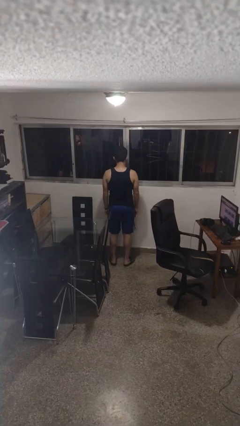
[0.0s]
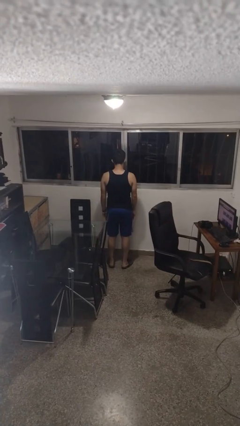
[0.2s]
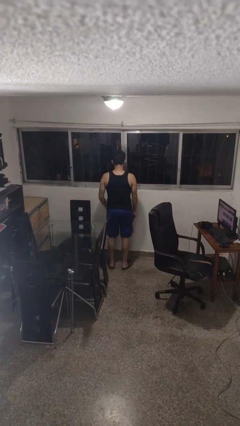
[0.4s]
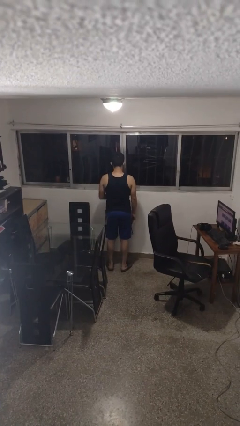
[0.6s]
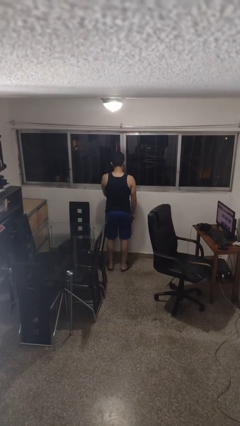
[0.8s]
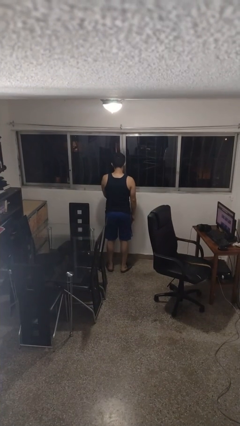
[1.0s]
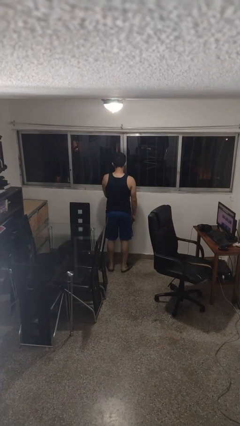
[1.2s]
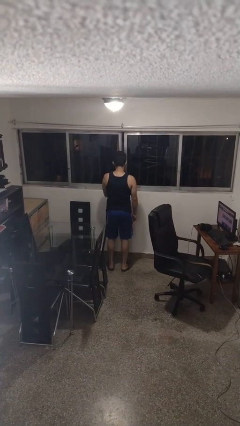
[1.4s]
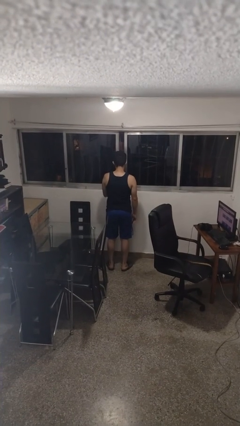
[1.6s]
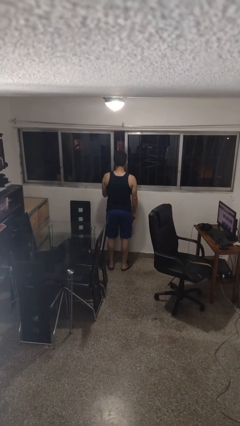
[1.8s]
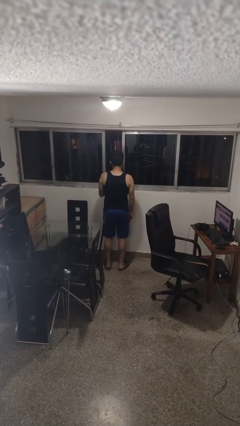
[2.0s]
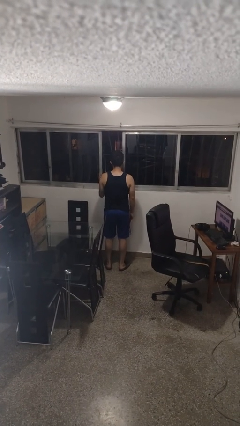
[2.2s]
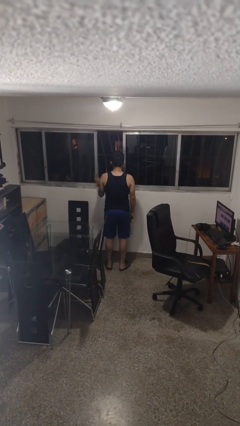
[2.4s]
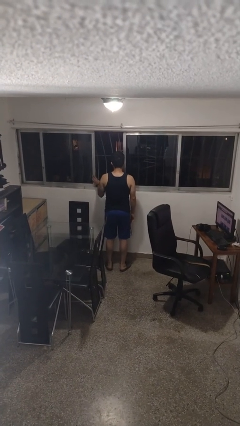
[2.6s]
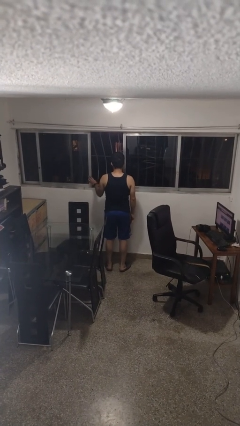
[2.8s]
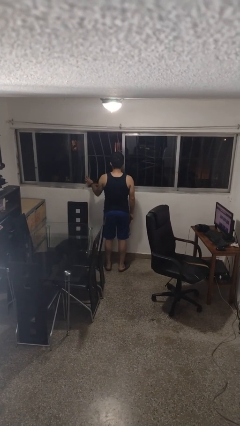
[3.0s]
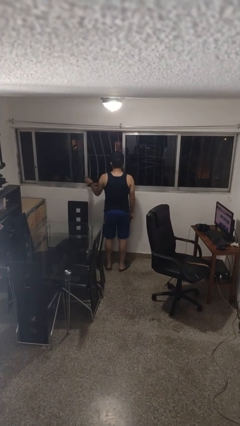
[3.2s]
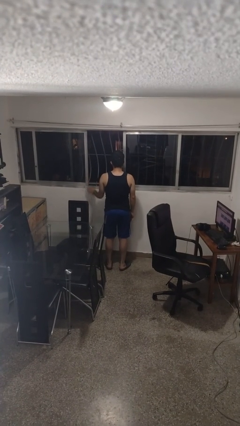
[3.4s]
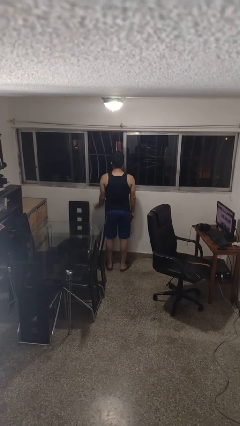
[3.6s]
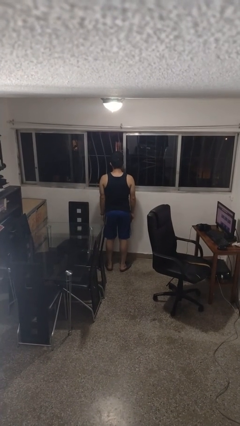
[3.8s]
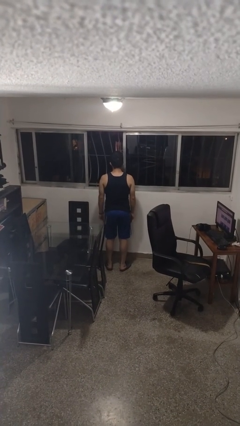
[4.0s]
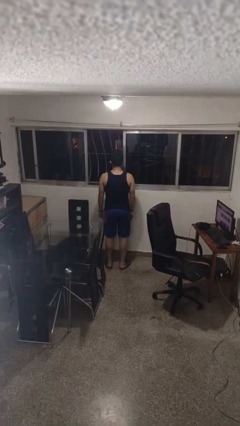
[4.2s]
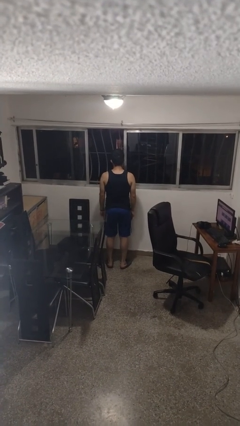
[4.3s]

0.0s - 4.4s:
person opens home window

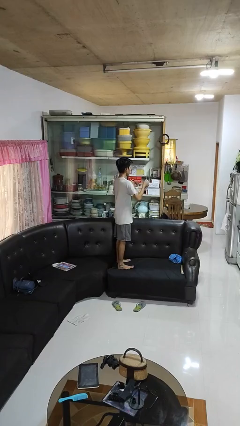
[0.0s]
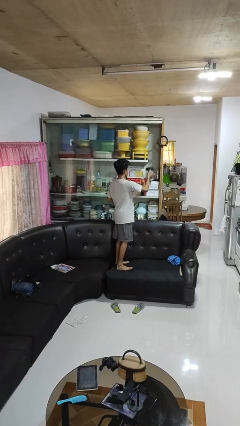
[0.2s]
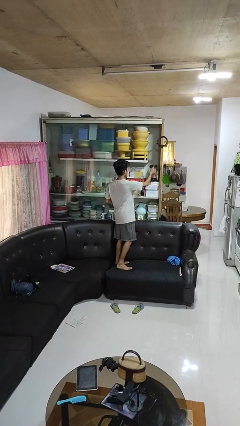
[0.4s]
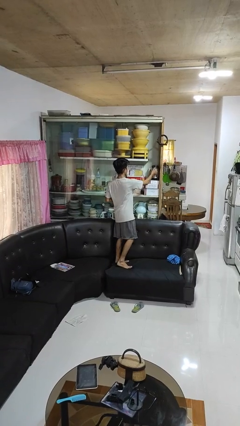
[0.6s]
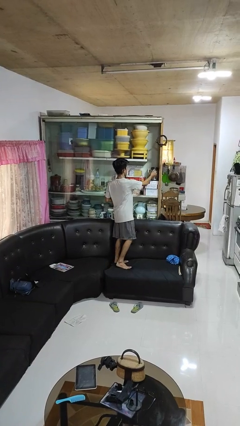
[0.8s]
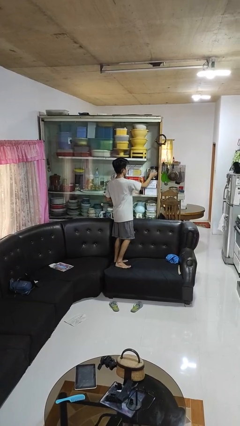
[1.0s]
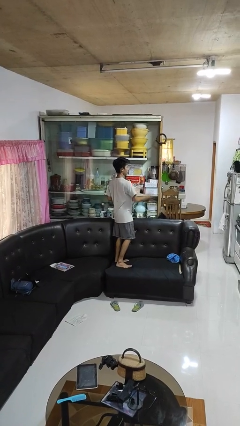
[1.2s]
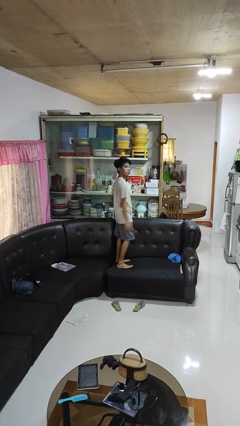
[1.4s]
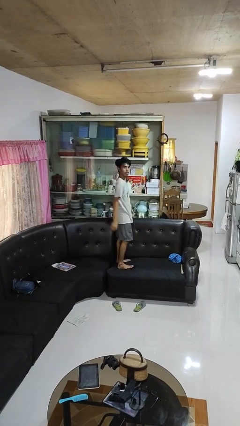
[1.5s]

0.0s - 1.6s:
person puts down object into cabinet

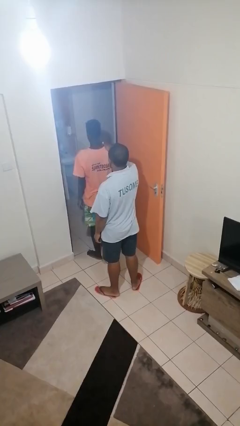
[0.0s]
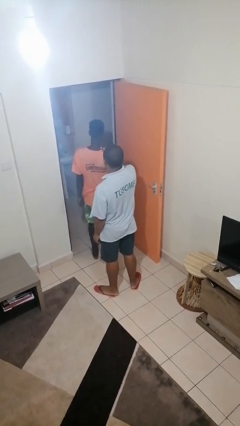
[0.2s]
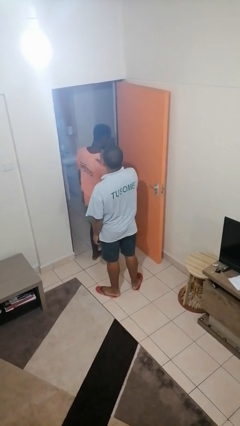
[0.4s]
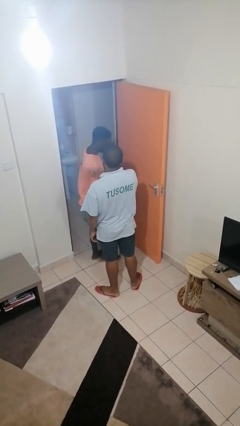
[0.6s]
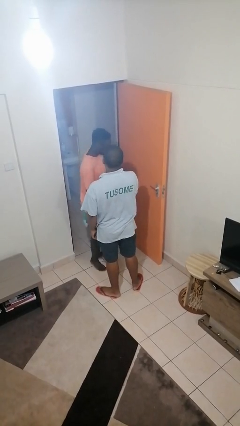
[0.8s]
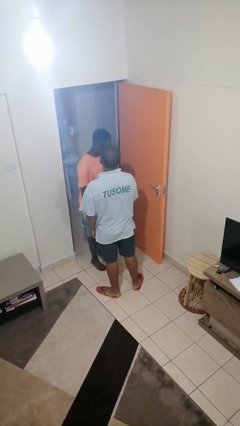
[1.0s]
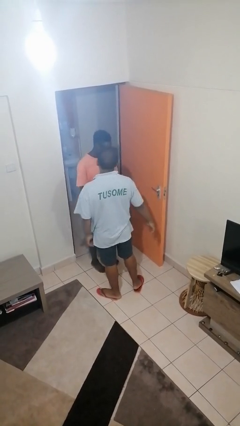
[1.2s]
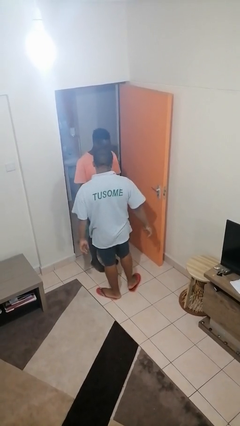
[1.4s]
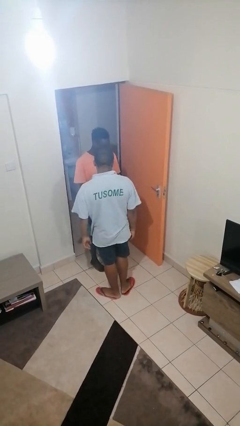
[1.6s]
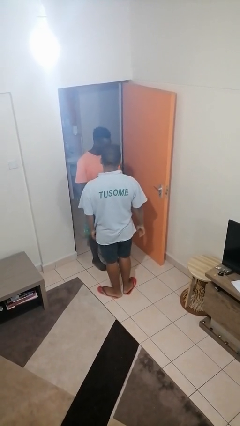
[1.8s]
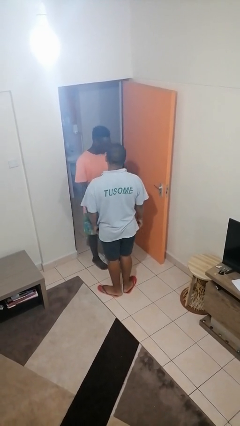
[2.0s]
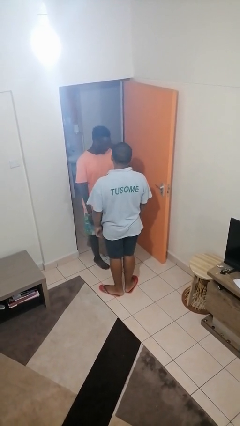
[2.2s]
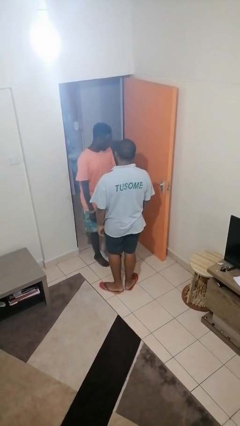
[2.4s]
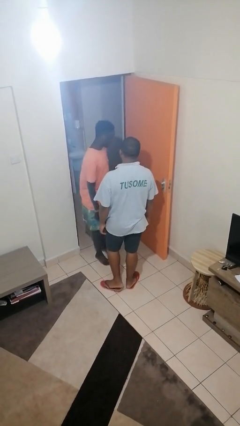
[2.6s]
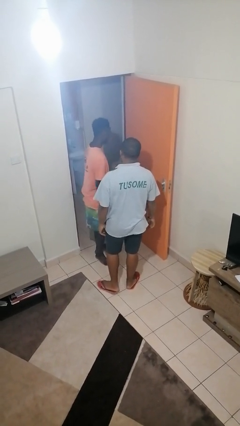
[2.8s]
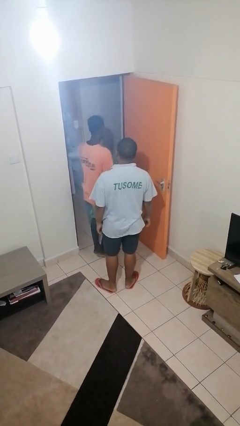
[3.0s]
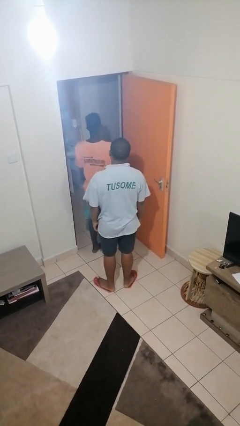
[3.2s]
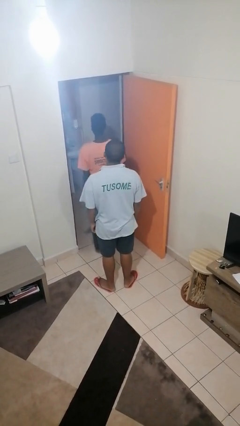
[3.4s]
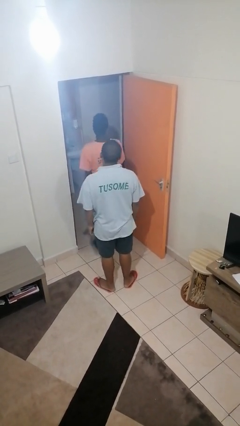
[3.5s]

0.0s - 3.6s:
person spins person around

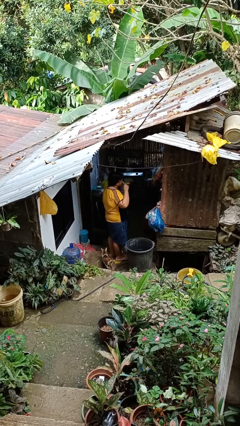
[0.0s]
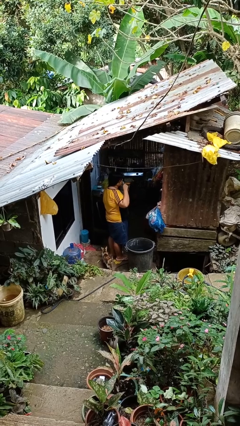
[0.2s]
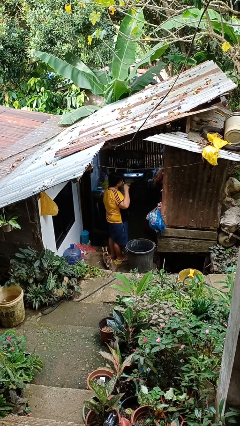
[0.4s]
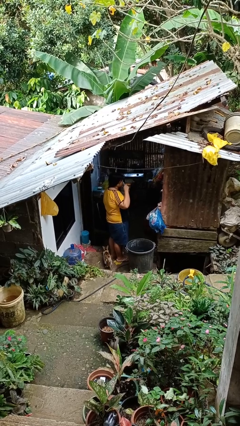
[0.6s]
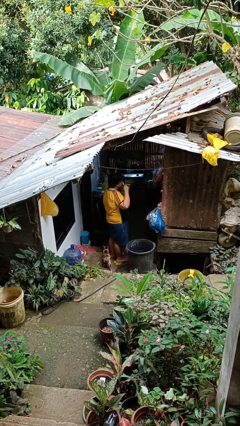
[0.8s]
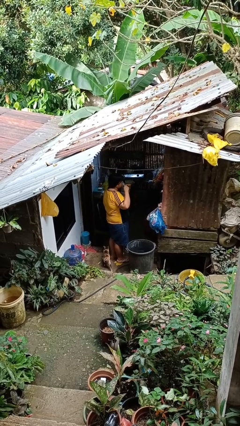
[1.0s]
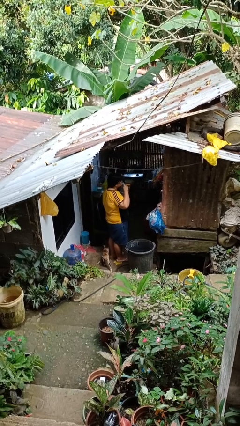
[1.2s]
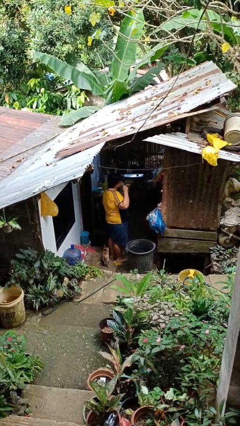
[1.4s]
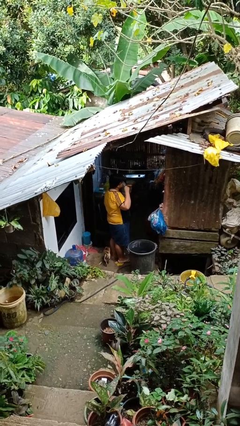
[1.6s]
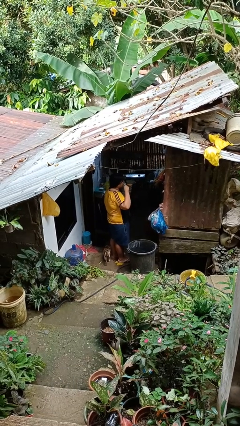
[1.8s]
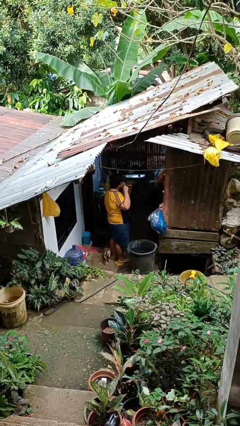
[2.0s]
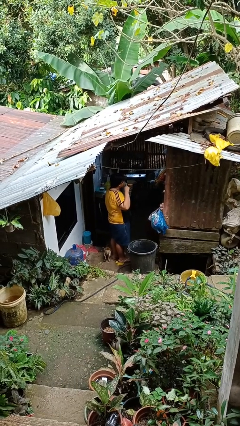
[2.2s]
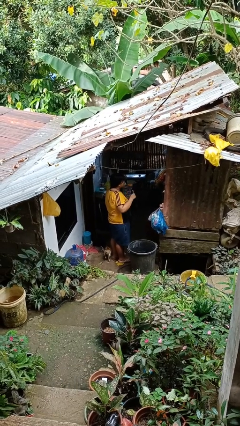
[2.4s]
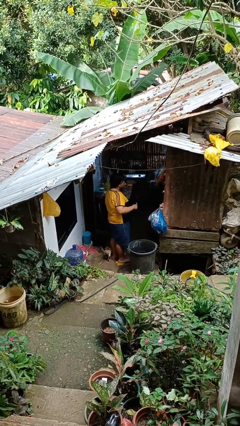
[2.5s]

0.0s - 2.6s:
person brushes teeth

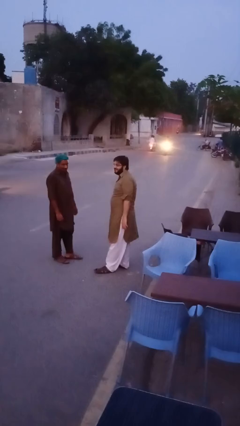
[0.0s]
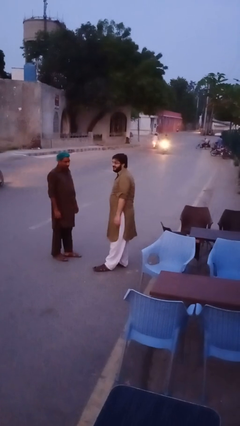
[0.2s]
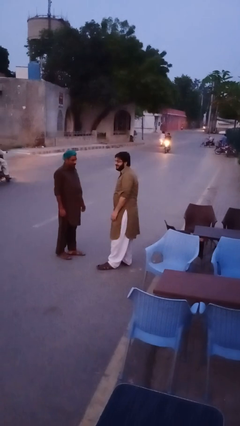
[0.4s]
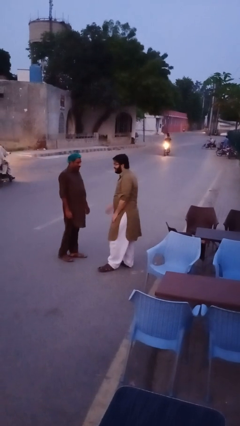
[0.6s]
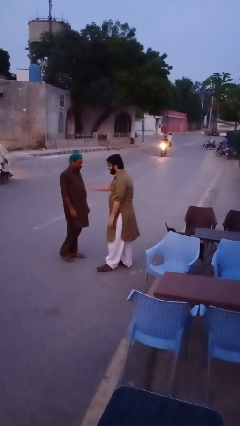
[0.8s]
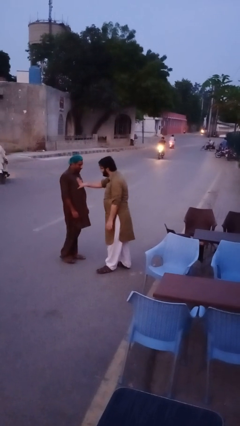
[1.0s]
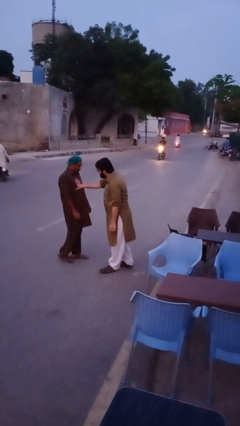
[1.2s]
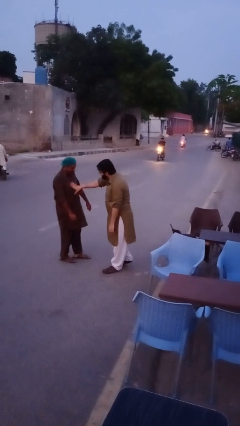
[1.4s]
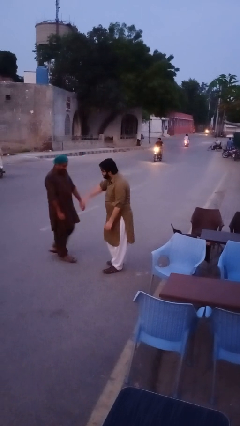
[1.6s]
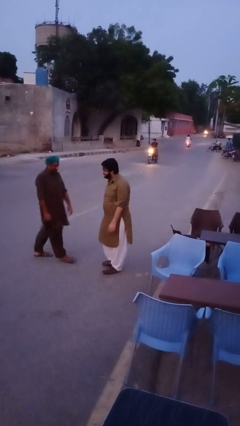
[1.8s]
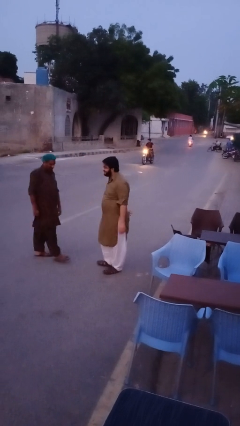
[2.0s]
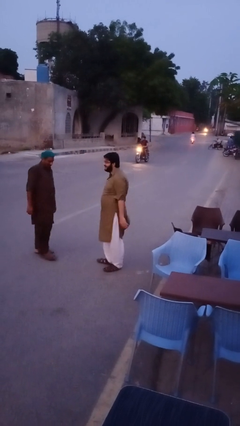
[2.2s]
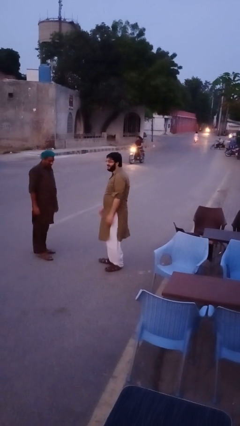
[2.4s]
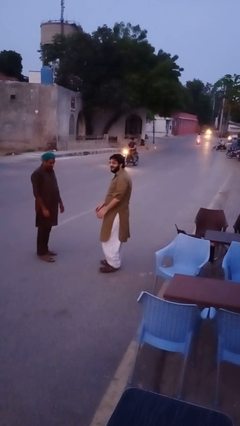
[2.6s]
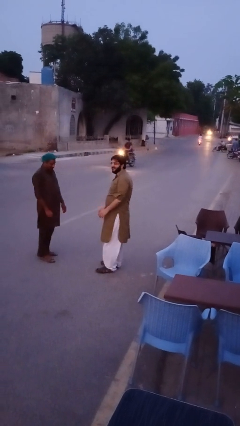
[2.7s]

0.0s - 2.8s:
person shoves person

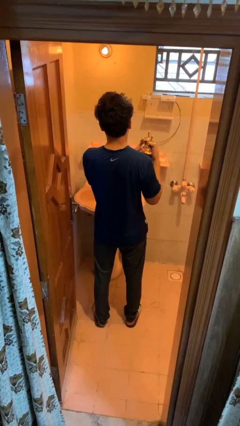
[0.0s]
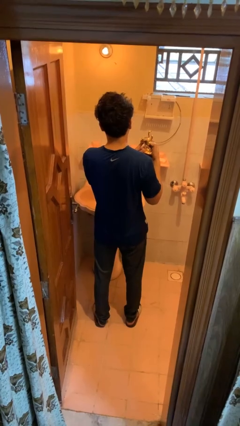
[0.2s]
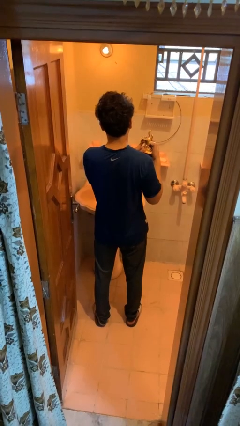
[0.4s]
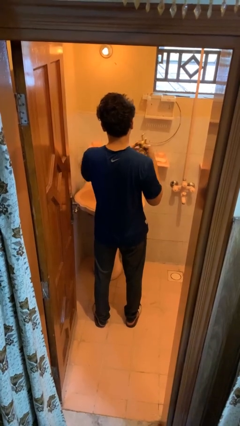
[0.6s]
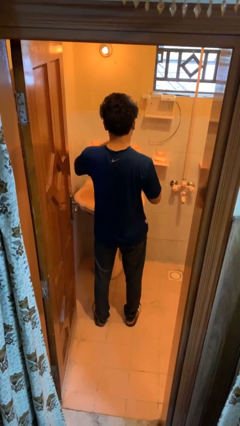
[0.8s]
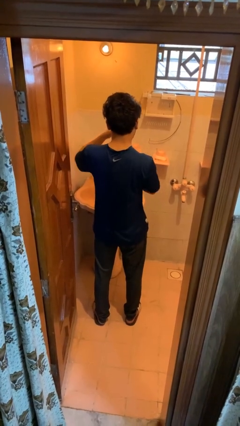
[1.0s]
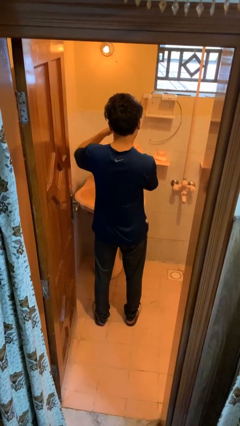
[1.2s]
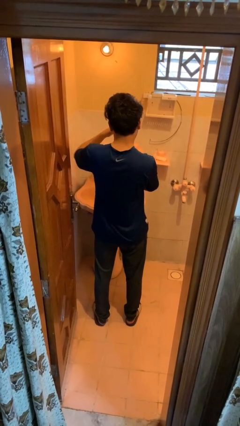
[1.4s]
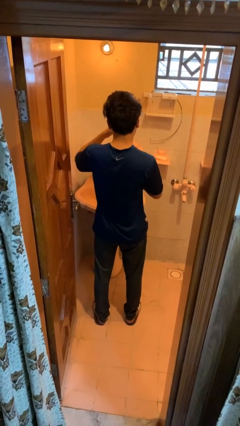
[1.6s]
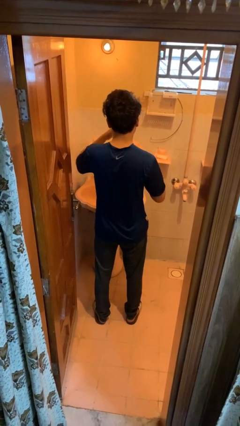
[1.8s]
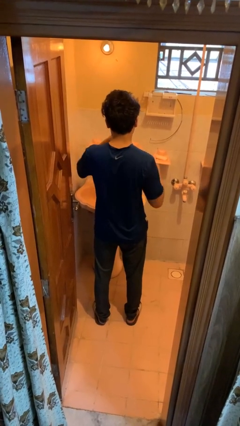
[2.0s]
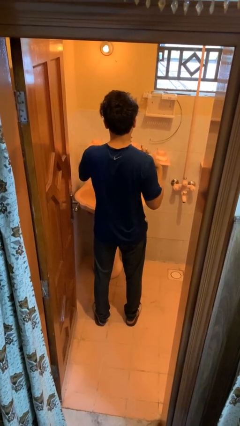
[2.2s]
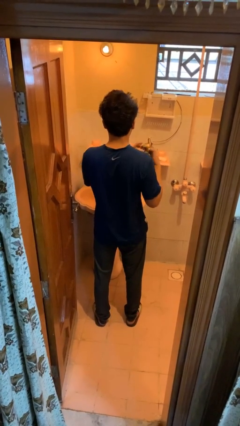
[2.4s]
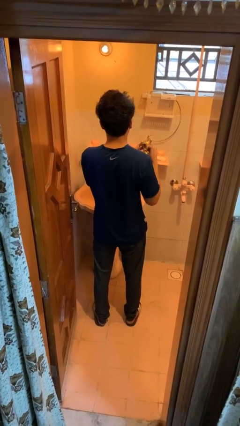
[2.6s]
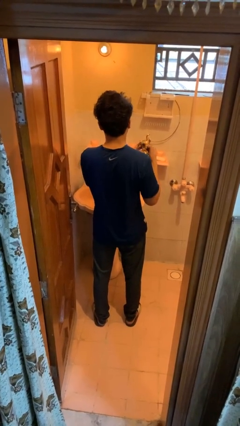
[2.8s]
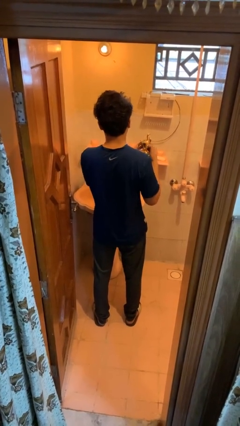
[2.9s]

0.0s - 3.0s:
person applies deodorant
